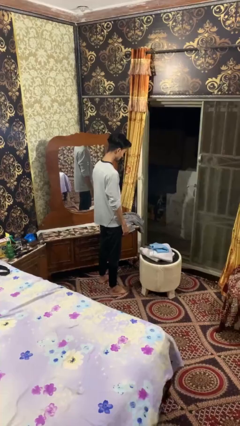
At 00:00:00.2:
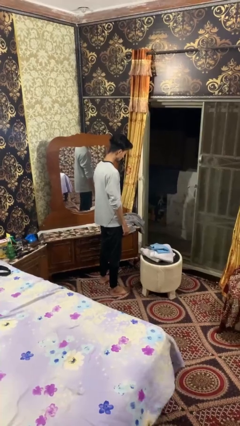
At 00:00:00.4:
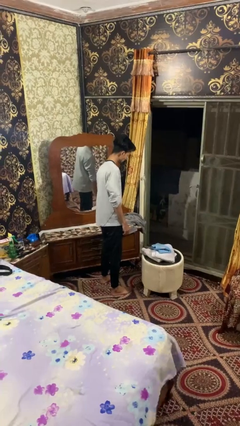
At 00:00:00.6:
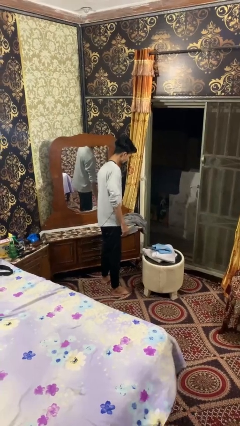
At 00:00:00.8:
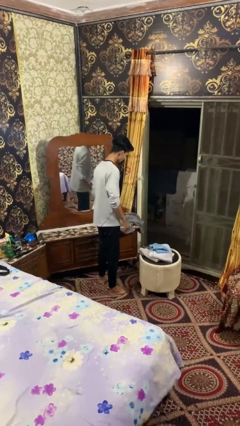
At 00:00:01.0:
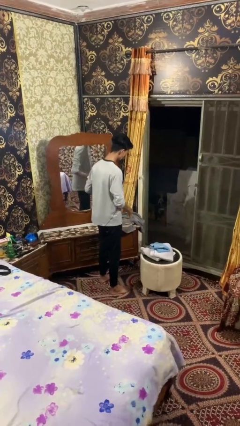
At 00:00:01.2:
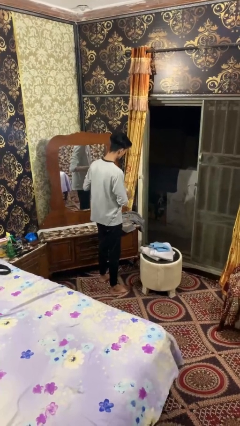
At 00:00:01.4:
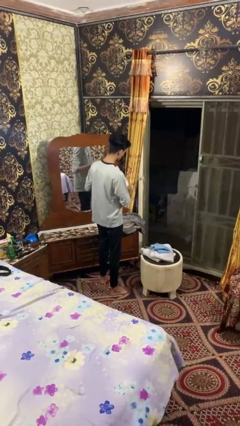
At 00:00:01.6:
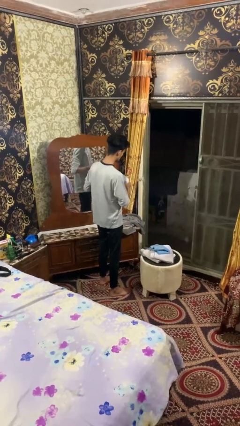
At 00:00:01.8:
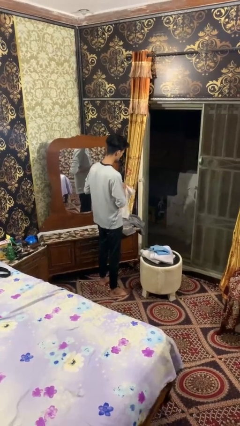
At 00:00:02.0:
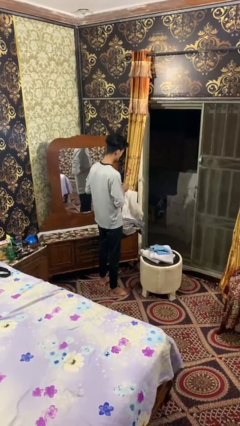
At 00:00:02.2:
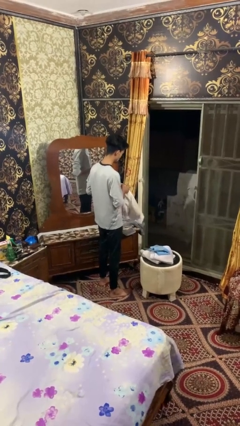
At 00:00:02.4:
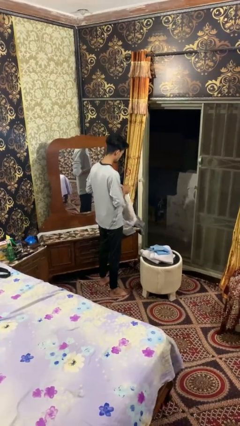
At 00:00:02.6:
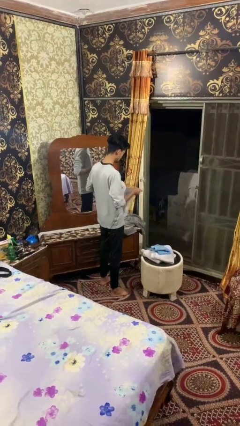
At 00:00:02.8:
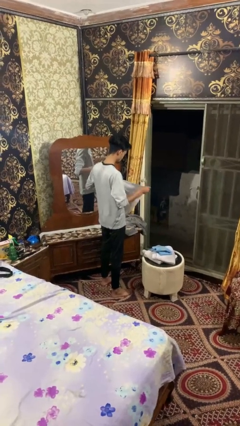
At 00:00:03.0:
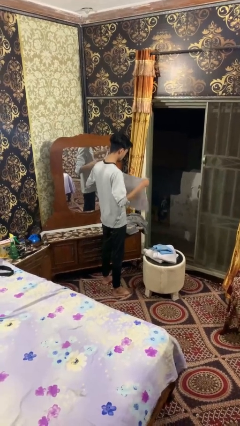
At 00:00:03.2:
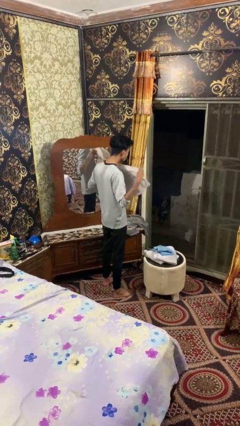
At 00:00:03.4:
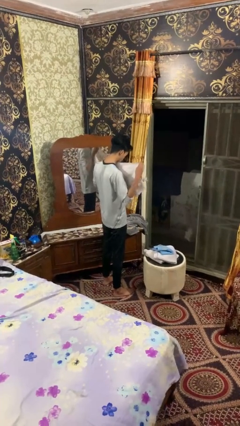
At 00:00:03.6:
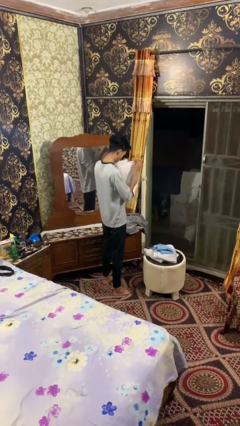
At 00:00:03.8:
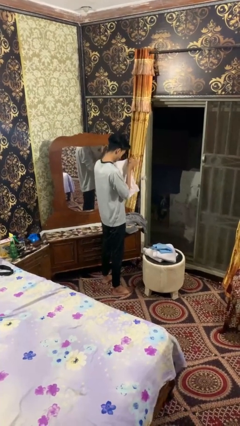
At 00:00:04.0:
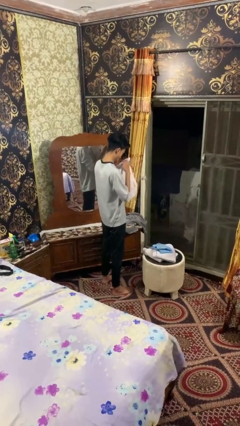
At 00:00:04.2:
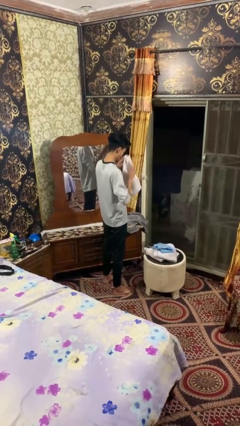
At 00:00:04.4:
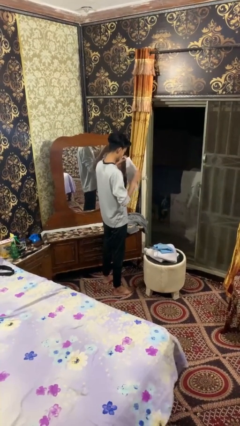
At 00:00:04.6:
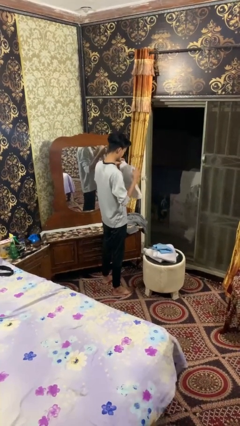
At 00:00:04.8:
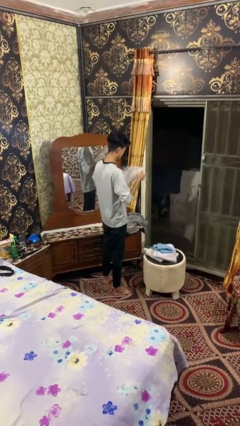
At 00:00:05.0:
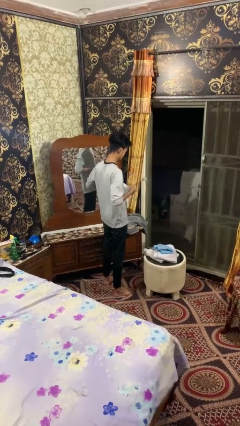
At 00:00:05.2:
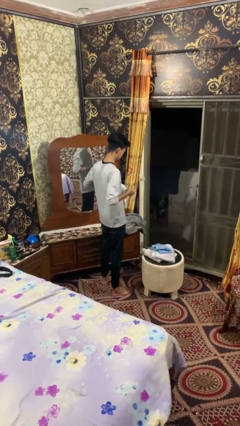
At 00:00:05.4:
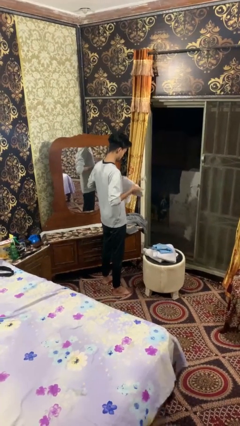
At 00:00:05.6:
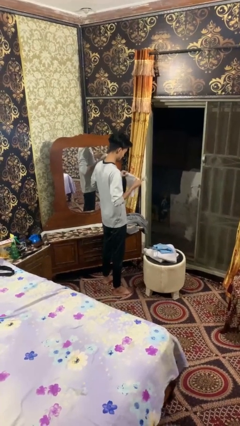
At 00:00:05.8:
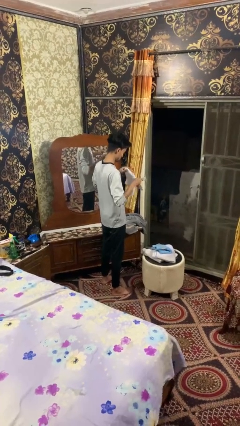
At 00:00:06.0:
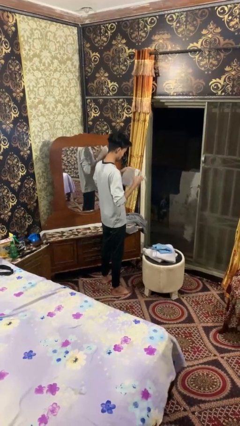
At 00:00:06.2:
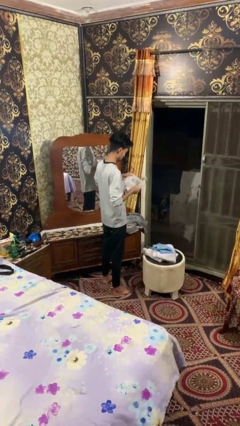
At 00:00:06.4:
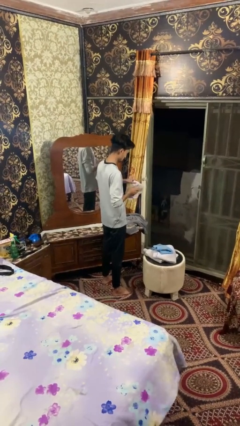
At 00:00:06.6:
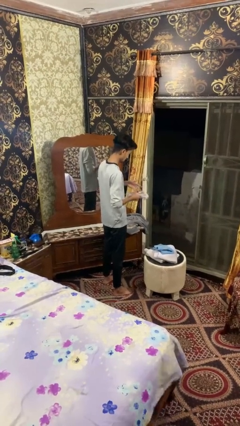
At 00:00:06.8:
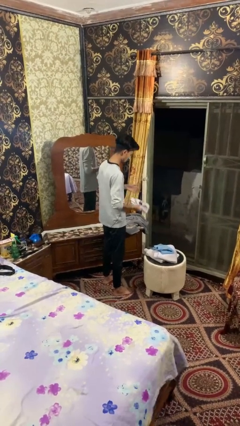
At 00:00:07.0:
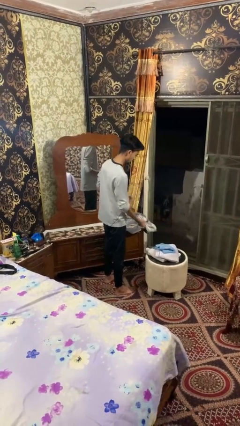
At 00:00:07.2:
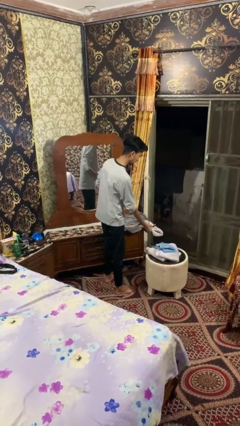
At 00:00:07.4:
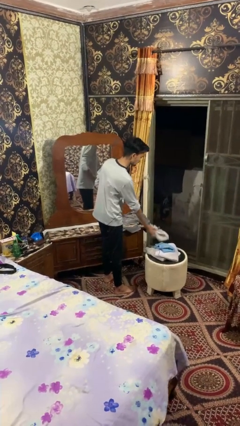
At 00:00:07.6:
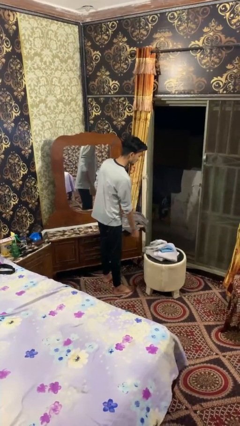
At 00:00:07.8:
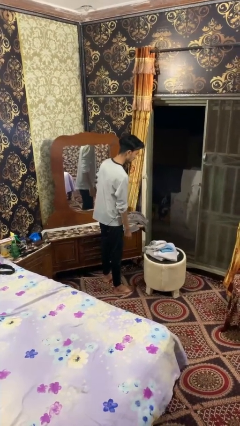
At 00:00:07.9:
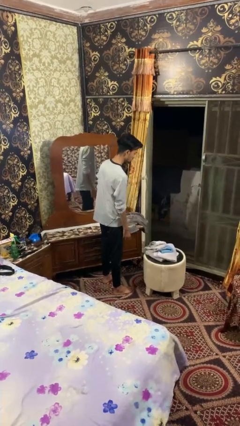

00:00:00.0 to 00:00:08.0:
person folds towel

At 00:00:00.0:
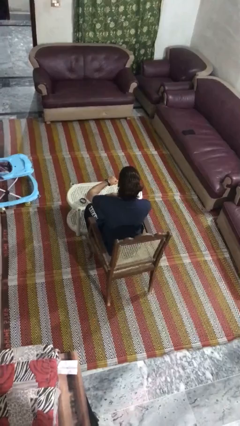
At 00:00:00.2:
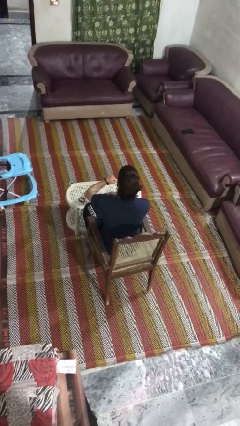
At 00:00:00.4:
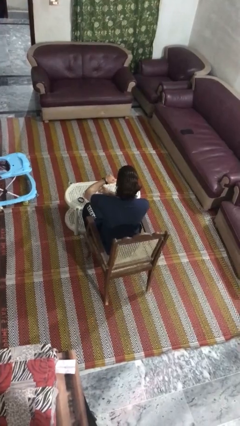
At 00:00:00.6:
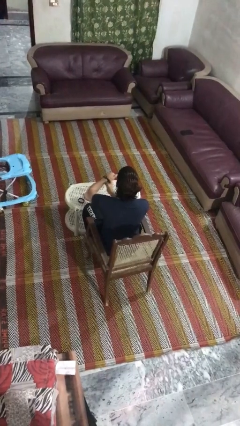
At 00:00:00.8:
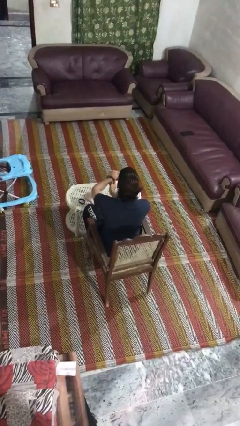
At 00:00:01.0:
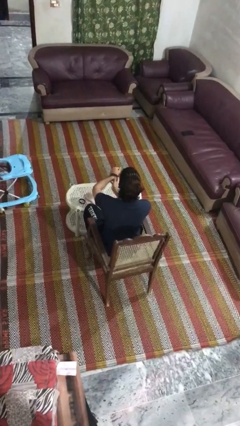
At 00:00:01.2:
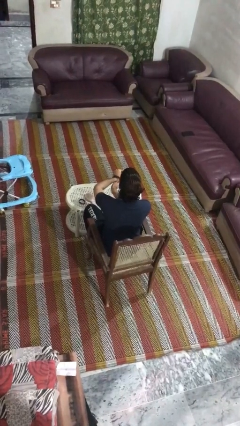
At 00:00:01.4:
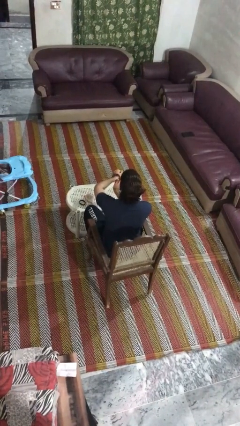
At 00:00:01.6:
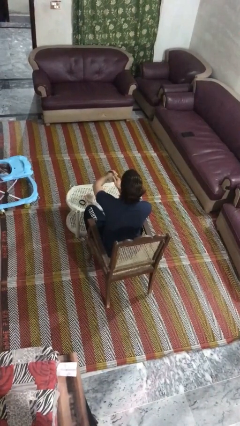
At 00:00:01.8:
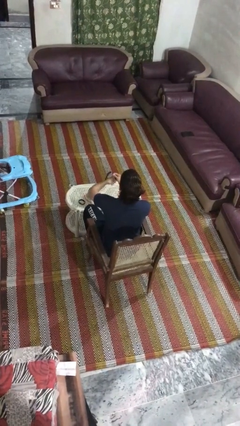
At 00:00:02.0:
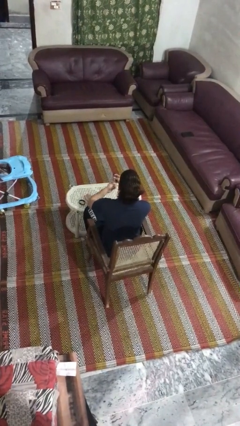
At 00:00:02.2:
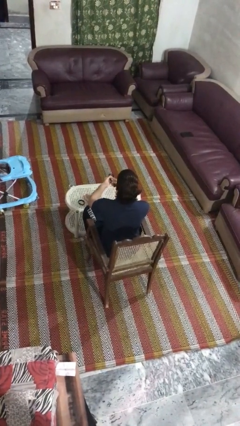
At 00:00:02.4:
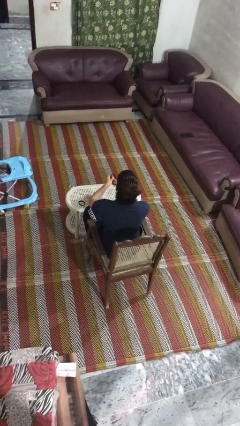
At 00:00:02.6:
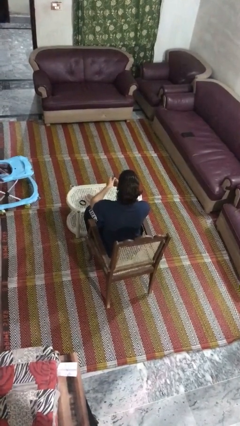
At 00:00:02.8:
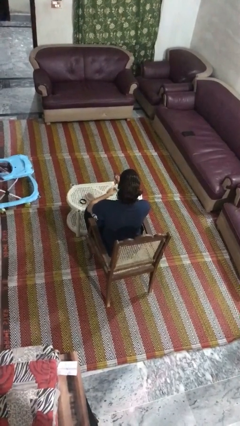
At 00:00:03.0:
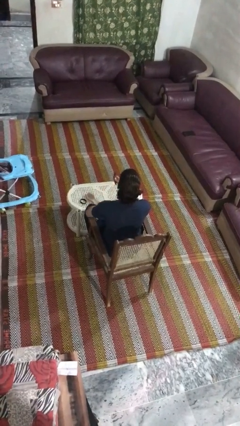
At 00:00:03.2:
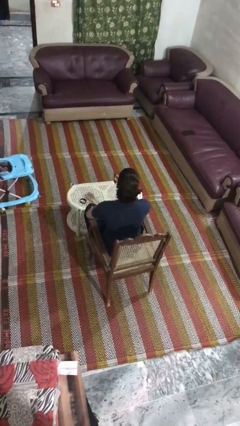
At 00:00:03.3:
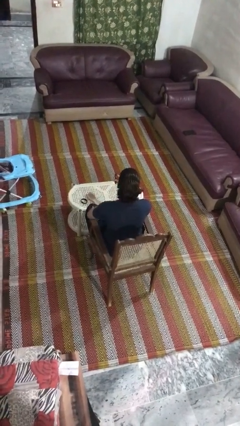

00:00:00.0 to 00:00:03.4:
person takes off wristwatch

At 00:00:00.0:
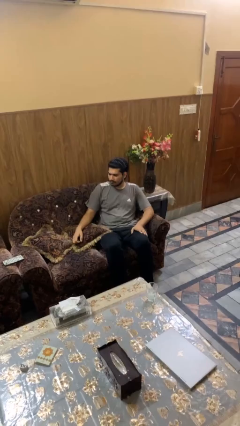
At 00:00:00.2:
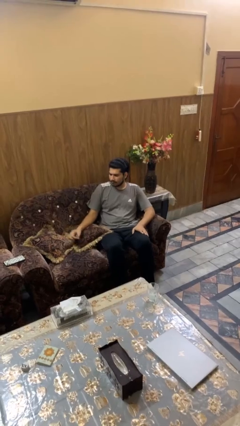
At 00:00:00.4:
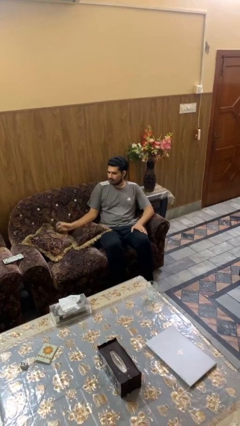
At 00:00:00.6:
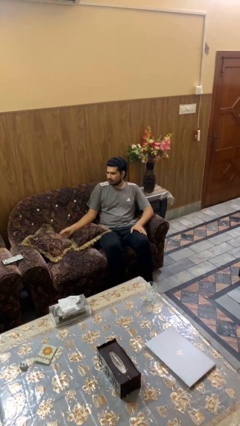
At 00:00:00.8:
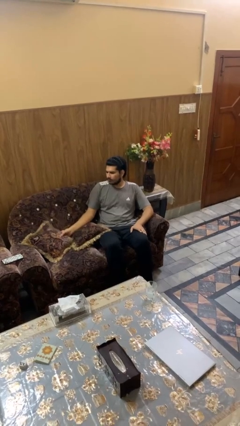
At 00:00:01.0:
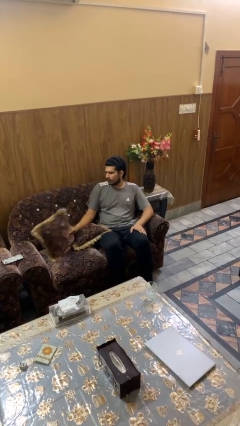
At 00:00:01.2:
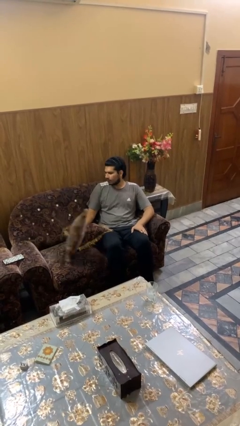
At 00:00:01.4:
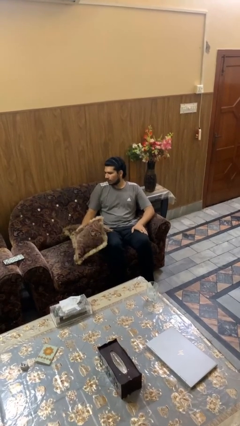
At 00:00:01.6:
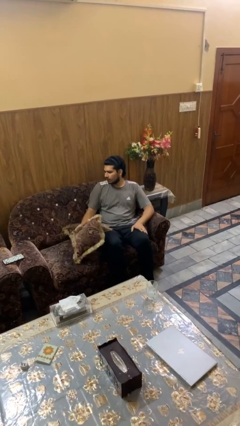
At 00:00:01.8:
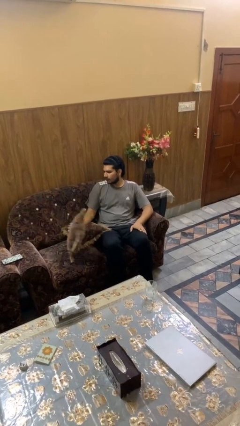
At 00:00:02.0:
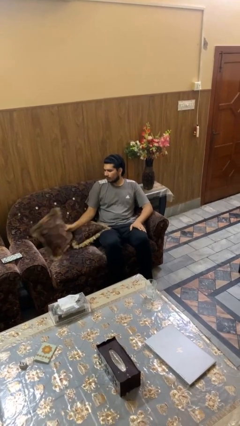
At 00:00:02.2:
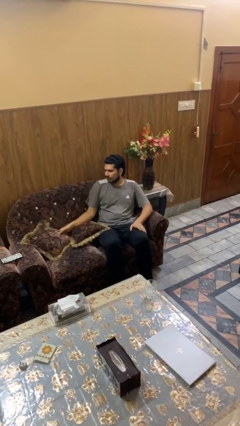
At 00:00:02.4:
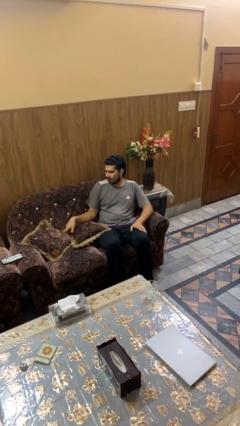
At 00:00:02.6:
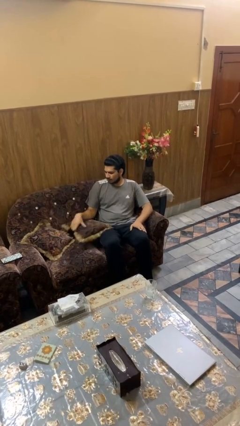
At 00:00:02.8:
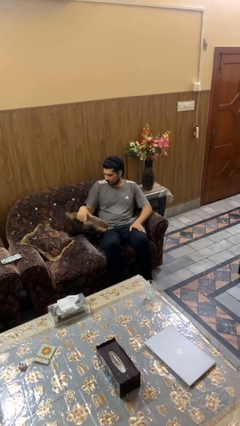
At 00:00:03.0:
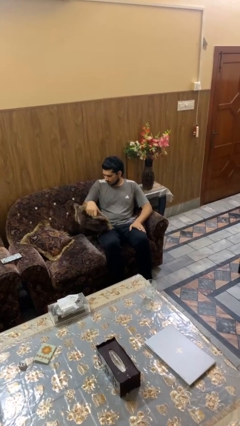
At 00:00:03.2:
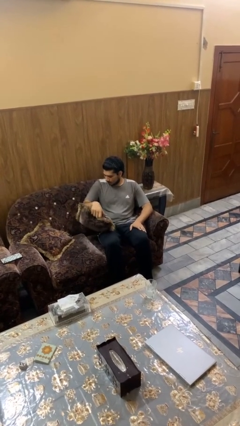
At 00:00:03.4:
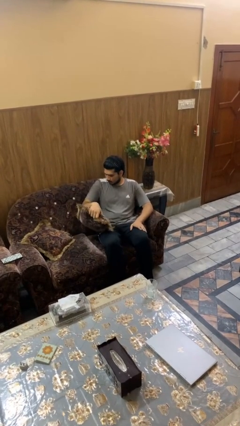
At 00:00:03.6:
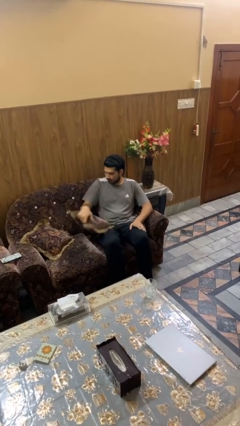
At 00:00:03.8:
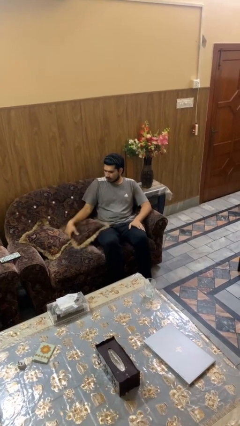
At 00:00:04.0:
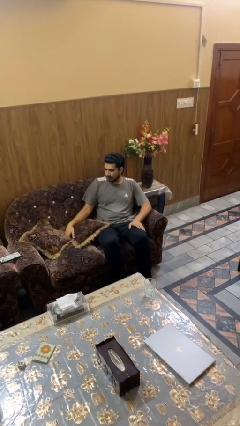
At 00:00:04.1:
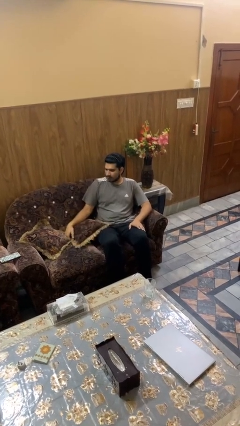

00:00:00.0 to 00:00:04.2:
person searches in couch

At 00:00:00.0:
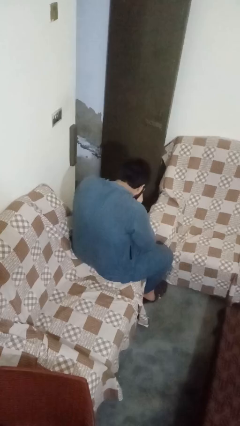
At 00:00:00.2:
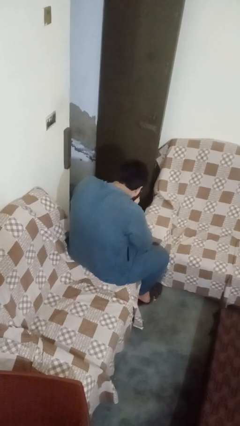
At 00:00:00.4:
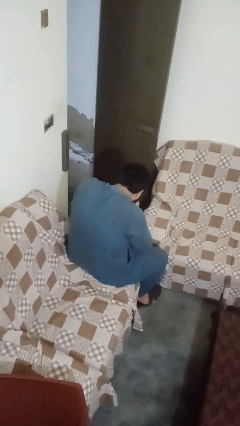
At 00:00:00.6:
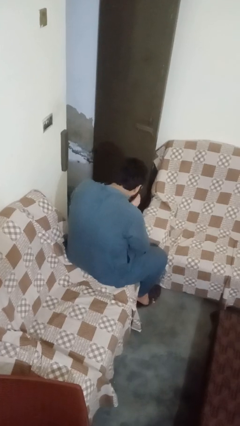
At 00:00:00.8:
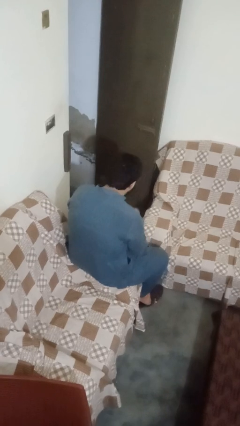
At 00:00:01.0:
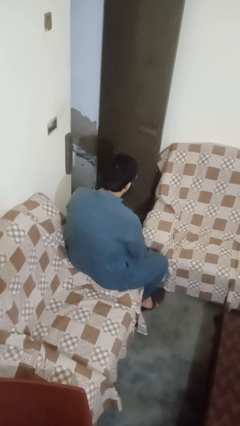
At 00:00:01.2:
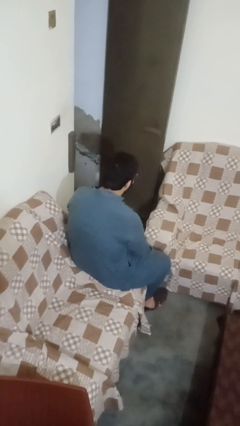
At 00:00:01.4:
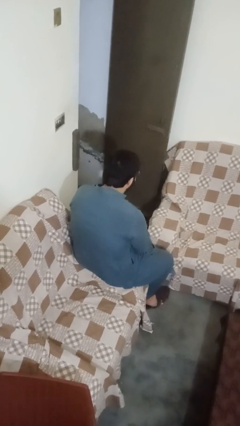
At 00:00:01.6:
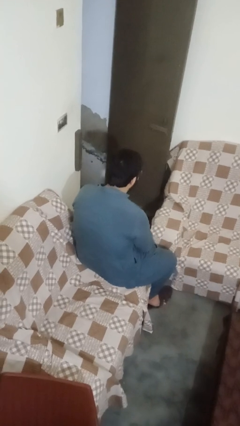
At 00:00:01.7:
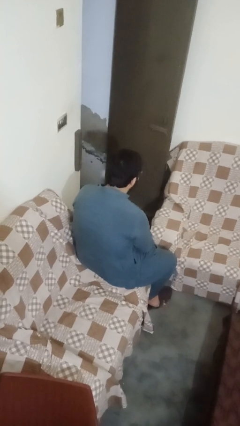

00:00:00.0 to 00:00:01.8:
person sneezes into hand
